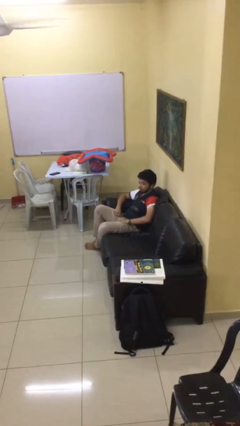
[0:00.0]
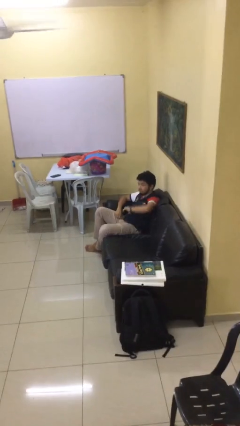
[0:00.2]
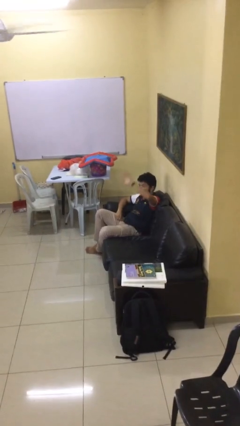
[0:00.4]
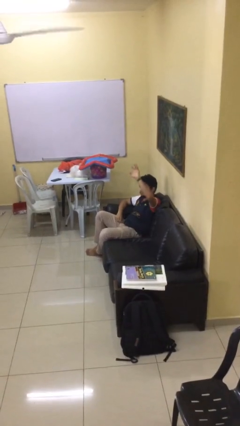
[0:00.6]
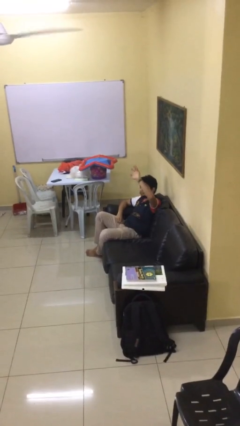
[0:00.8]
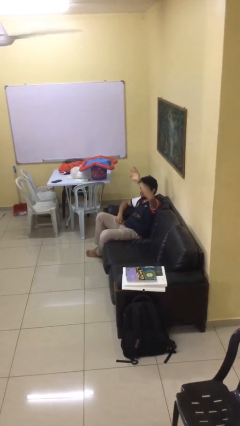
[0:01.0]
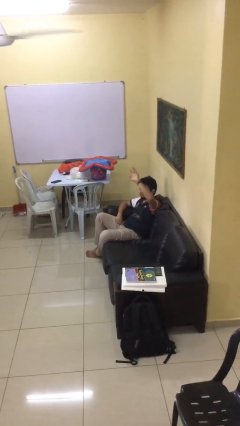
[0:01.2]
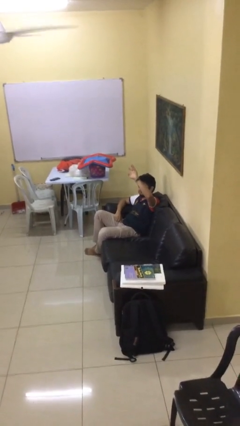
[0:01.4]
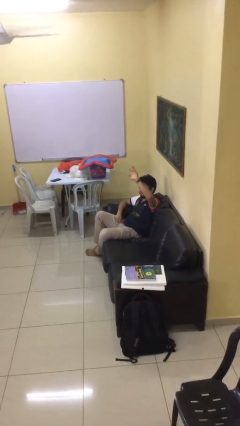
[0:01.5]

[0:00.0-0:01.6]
person gestures swipe up

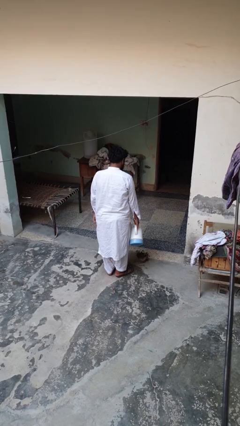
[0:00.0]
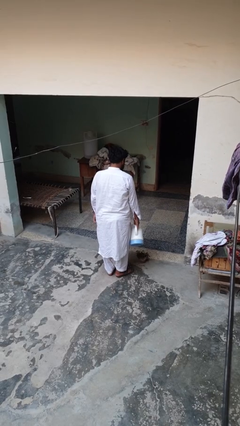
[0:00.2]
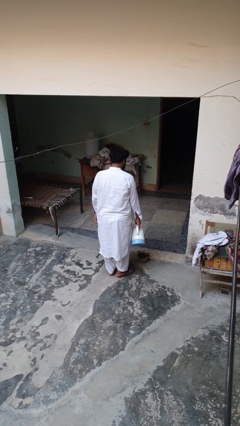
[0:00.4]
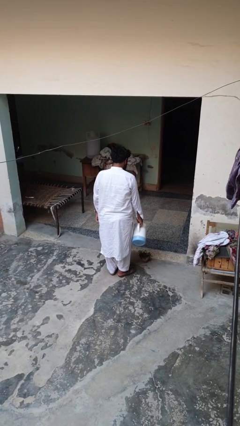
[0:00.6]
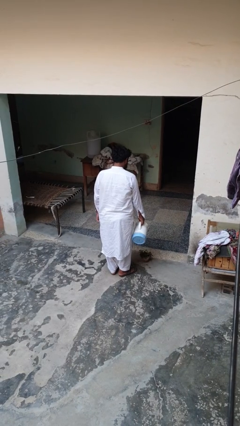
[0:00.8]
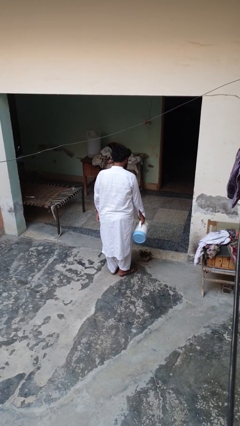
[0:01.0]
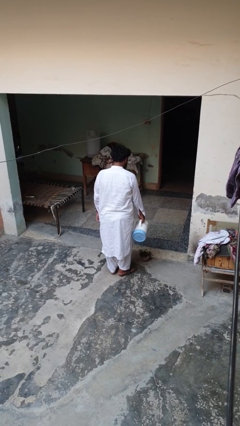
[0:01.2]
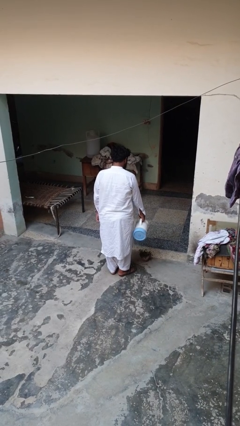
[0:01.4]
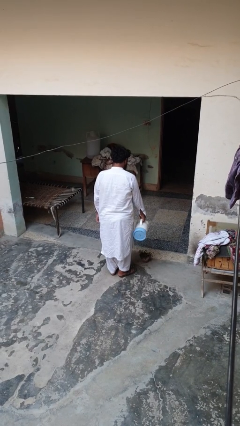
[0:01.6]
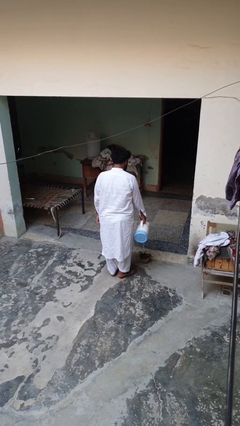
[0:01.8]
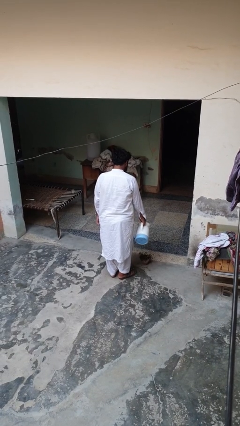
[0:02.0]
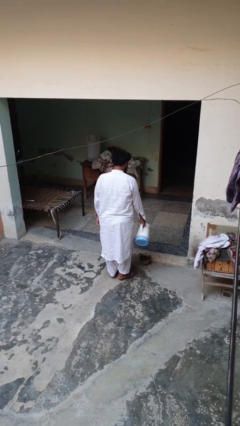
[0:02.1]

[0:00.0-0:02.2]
person waters houseplant

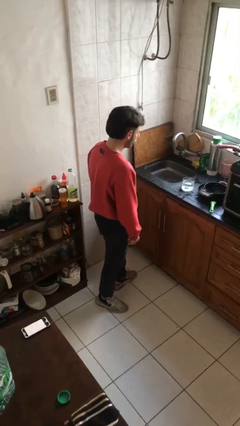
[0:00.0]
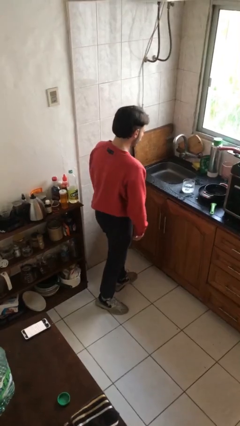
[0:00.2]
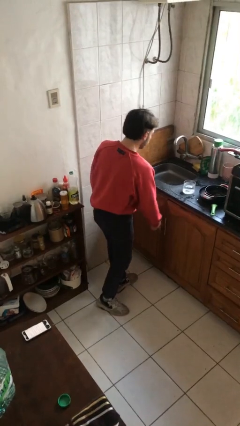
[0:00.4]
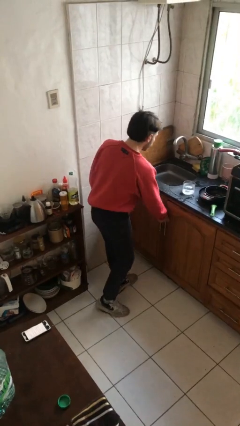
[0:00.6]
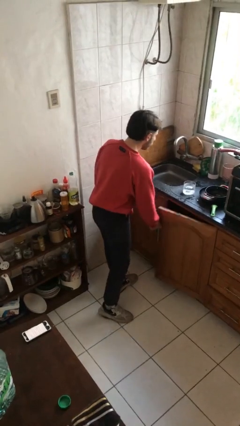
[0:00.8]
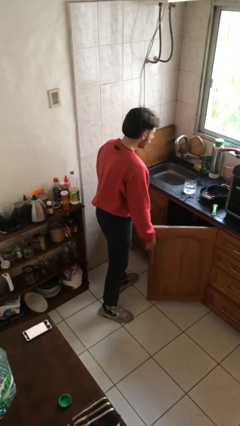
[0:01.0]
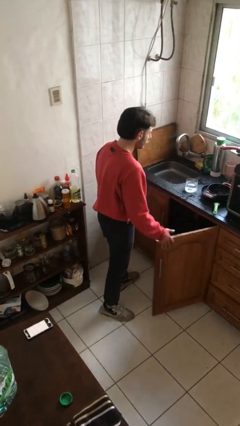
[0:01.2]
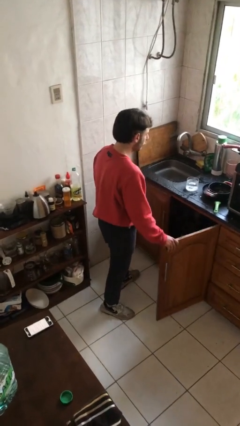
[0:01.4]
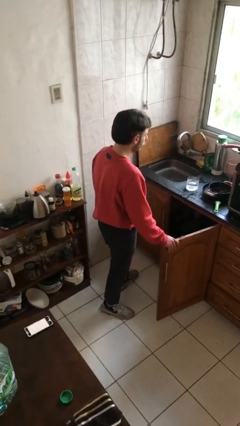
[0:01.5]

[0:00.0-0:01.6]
person opens cabinet

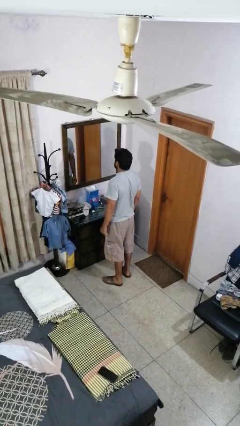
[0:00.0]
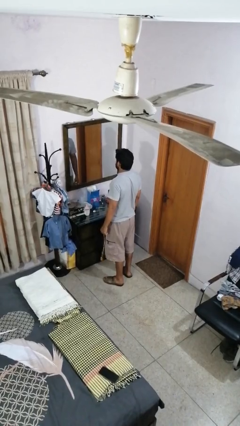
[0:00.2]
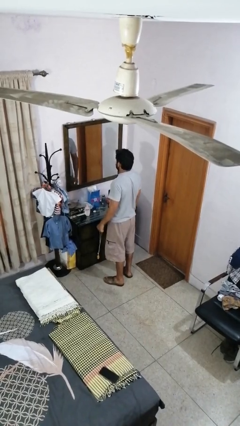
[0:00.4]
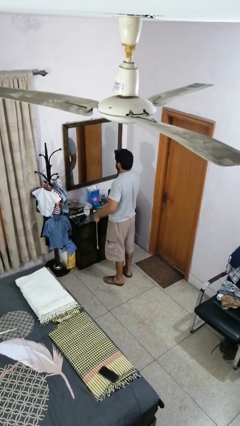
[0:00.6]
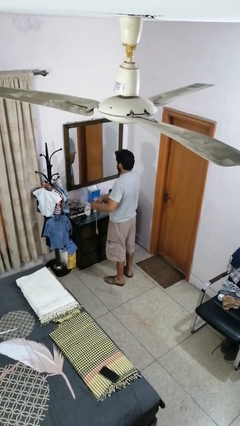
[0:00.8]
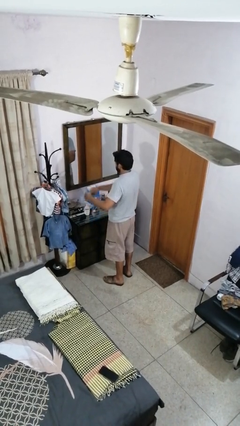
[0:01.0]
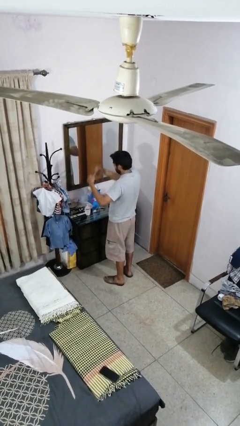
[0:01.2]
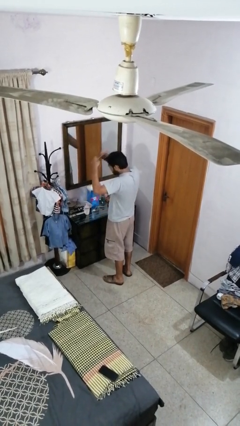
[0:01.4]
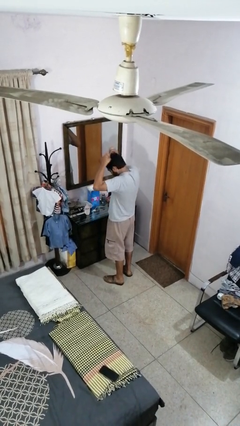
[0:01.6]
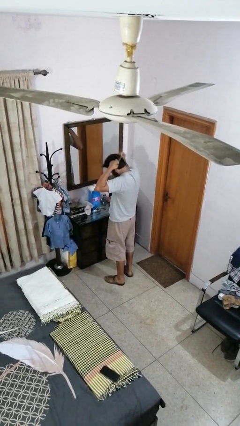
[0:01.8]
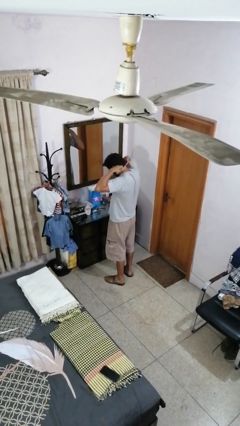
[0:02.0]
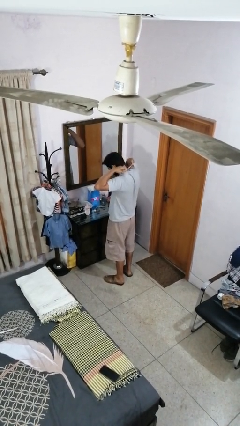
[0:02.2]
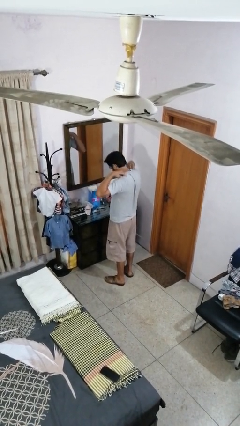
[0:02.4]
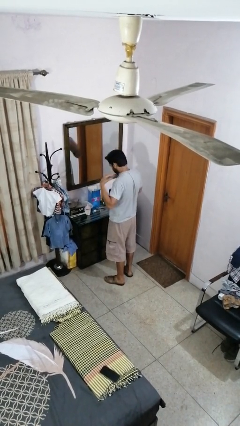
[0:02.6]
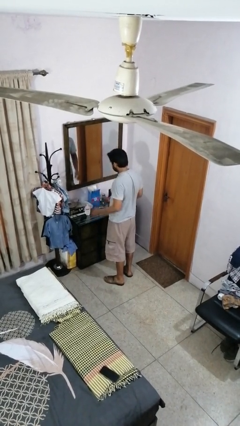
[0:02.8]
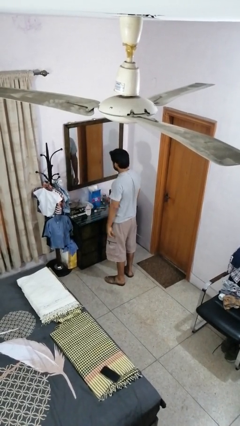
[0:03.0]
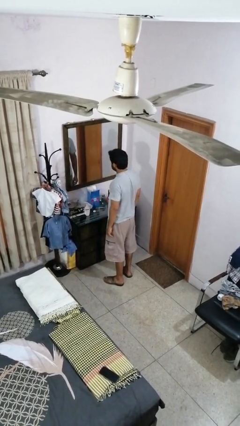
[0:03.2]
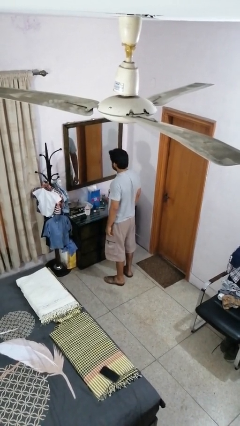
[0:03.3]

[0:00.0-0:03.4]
person puts on necklace

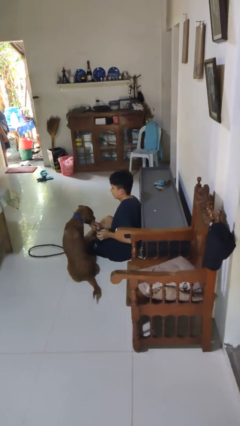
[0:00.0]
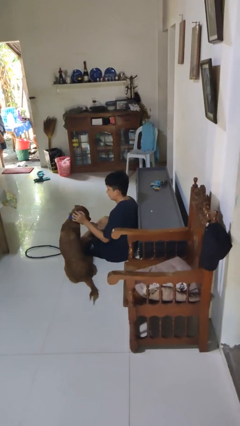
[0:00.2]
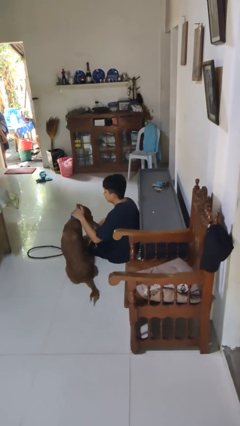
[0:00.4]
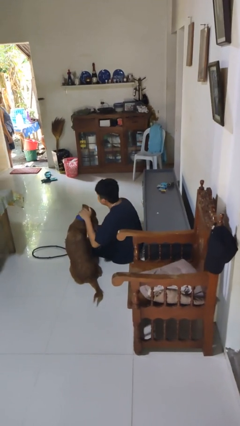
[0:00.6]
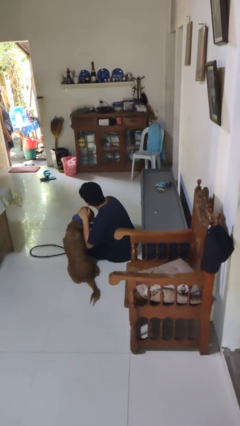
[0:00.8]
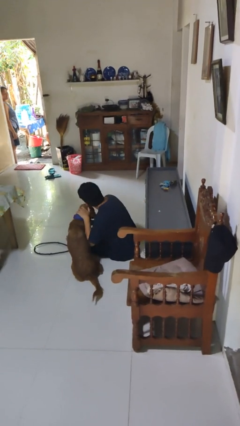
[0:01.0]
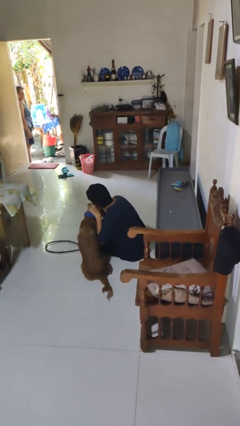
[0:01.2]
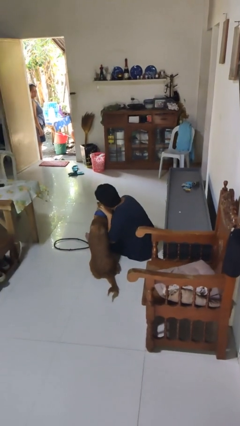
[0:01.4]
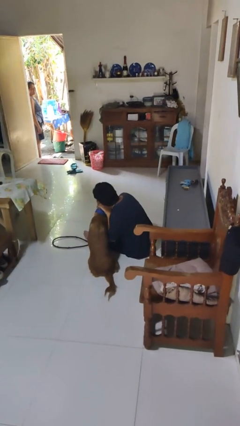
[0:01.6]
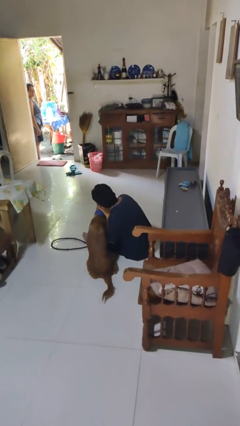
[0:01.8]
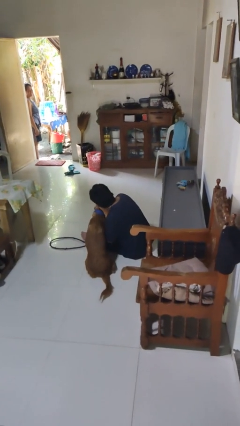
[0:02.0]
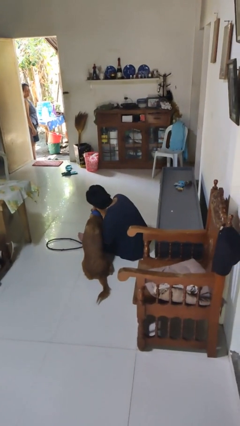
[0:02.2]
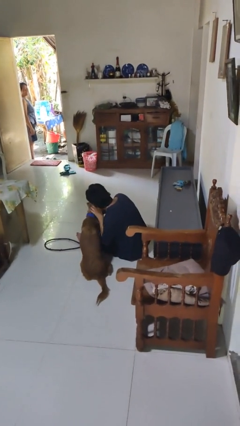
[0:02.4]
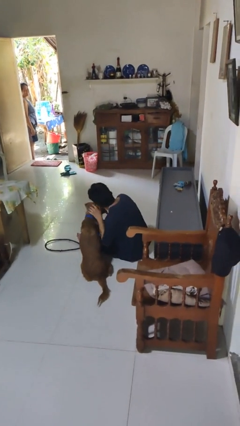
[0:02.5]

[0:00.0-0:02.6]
person hugs dog

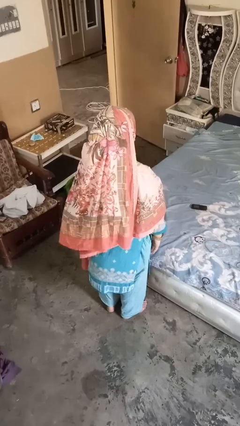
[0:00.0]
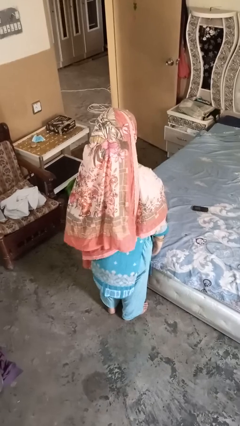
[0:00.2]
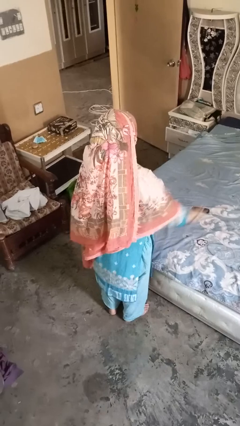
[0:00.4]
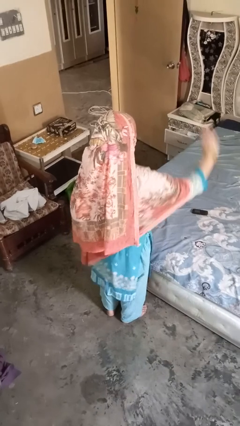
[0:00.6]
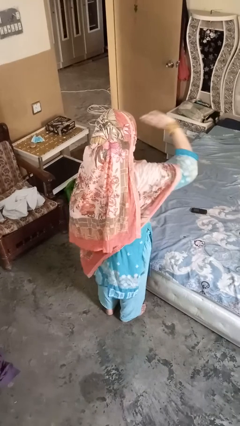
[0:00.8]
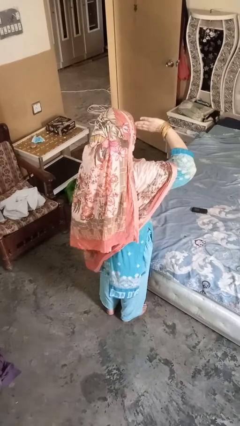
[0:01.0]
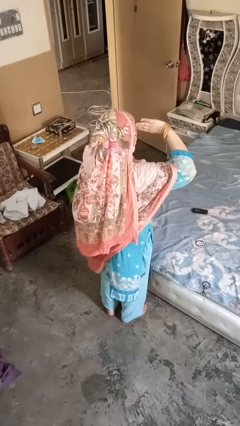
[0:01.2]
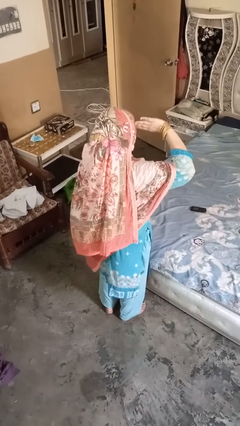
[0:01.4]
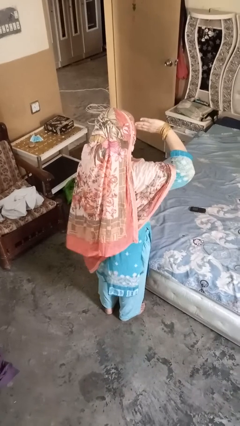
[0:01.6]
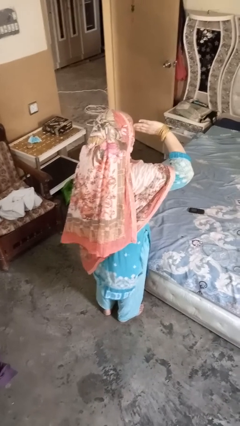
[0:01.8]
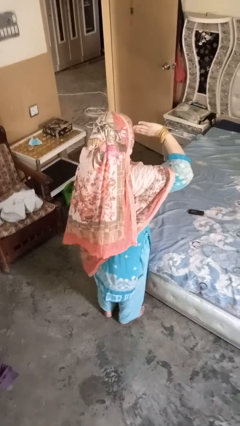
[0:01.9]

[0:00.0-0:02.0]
person salutes

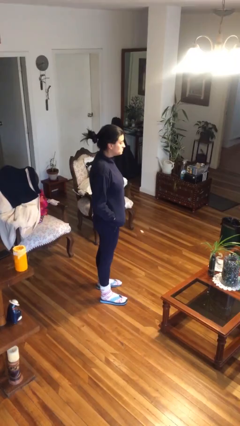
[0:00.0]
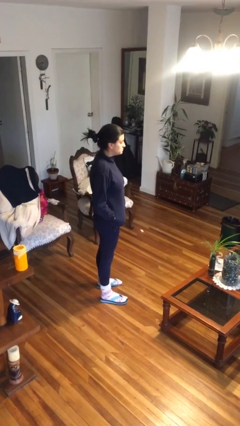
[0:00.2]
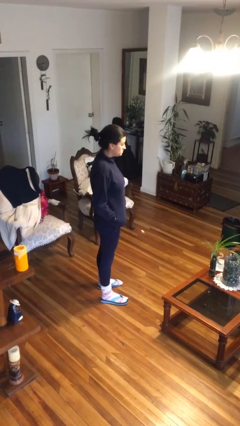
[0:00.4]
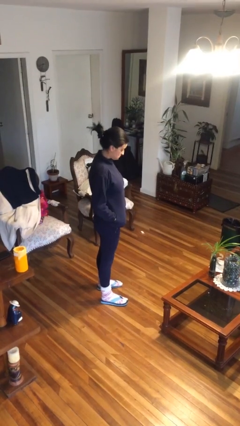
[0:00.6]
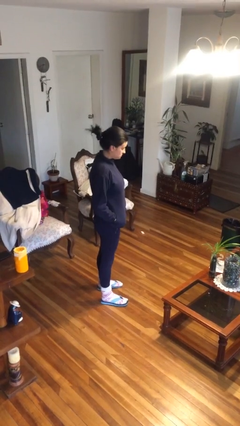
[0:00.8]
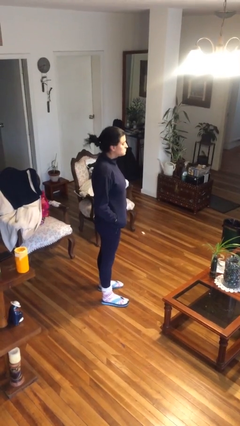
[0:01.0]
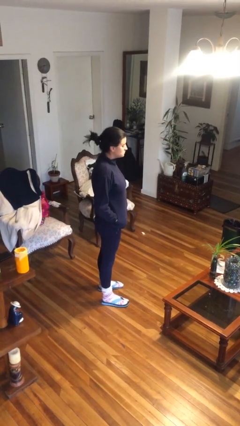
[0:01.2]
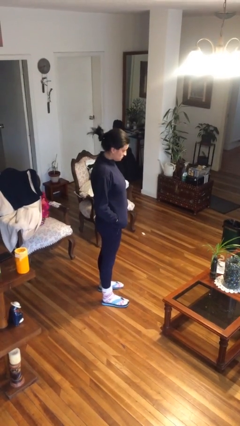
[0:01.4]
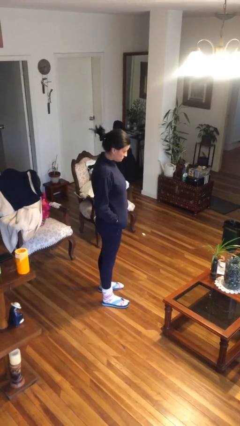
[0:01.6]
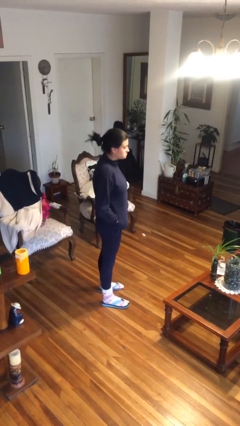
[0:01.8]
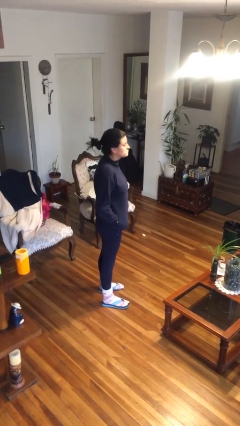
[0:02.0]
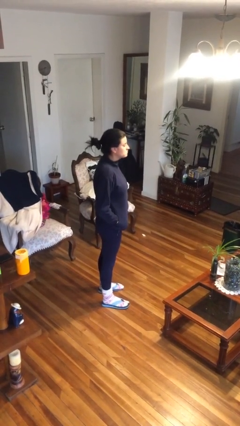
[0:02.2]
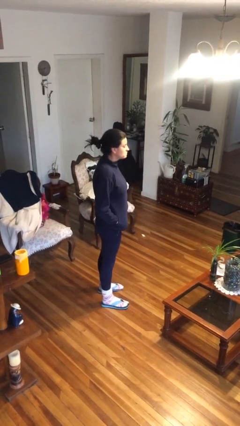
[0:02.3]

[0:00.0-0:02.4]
person nods head

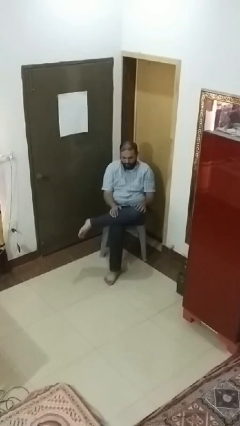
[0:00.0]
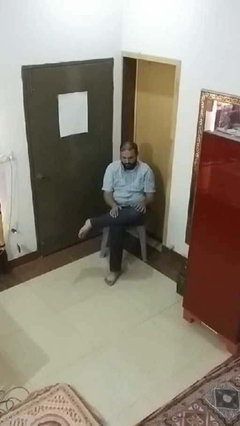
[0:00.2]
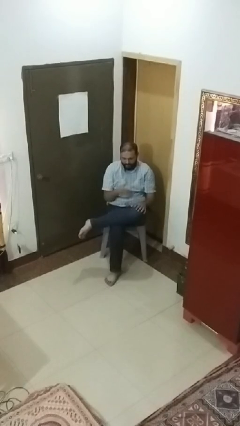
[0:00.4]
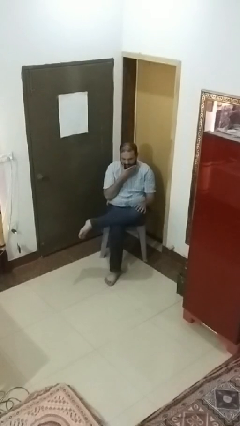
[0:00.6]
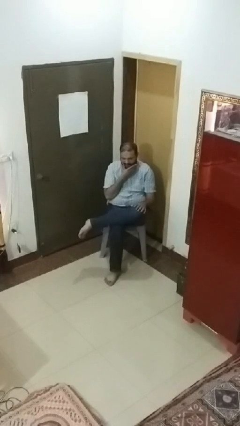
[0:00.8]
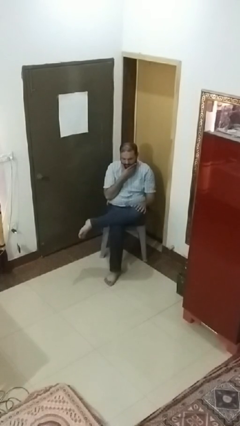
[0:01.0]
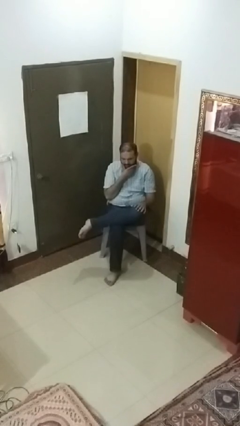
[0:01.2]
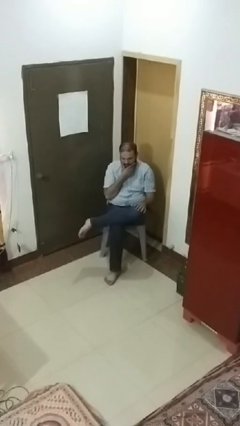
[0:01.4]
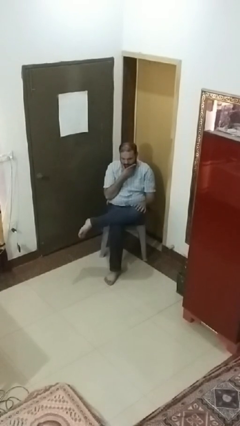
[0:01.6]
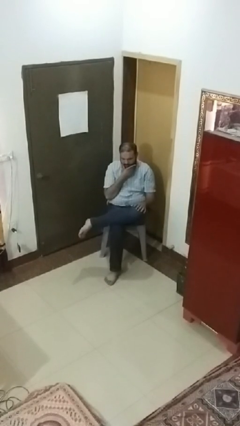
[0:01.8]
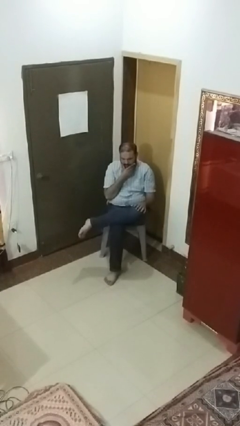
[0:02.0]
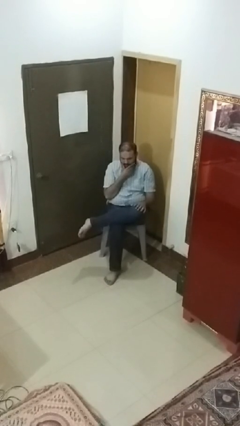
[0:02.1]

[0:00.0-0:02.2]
person strokes chin